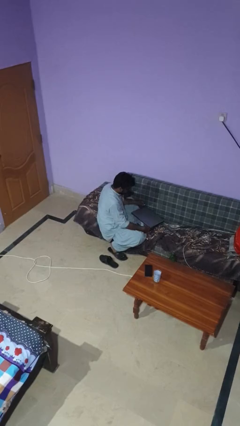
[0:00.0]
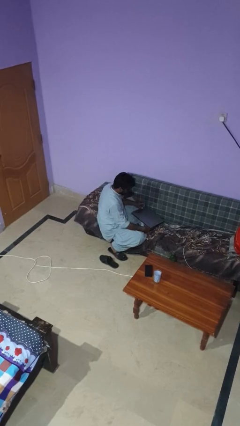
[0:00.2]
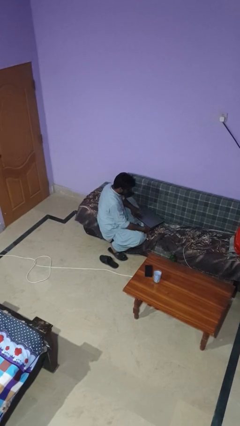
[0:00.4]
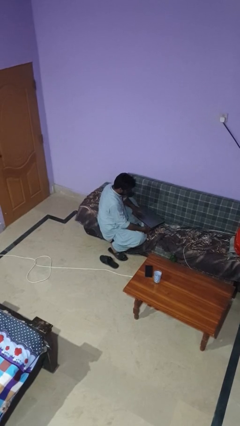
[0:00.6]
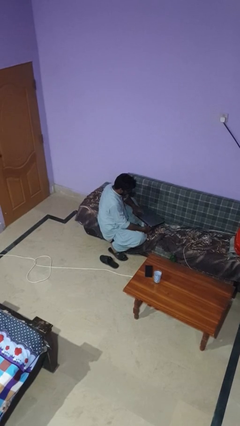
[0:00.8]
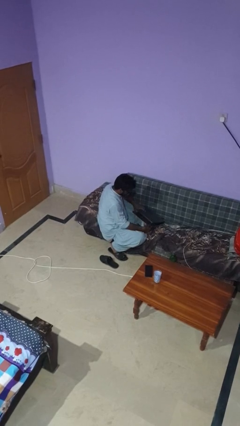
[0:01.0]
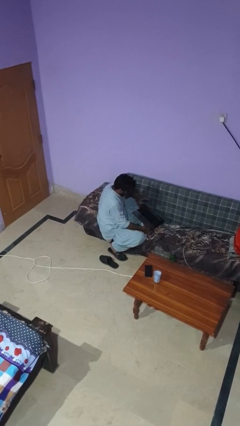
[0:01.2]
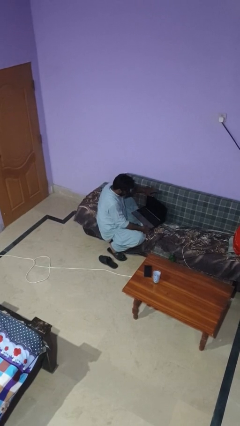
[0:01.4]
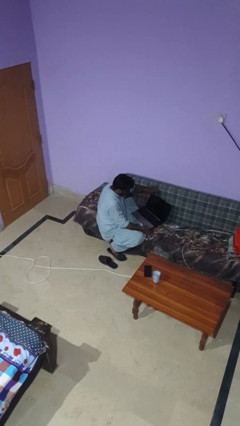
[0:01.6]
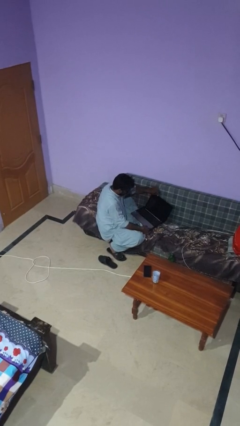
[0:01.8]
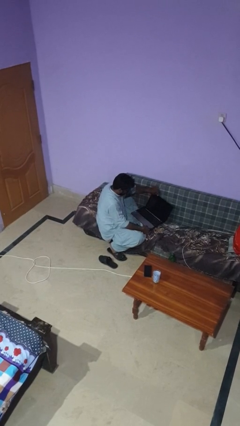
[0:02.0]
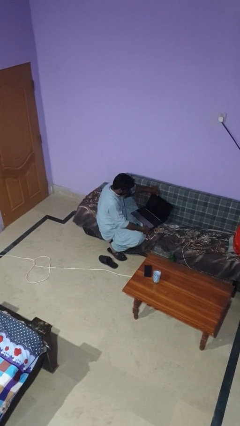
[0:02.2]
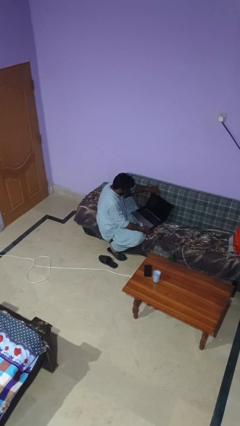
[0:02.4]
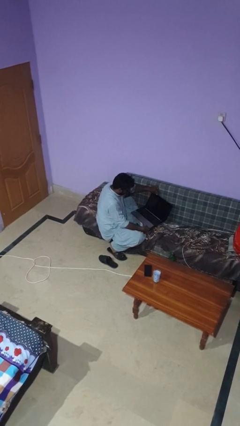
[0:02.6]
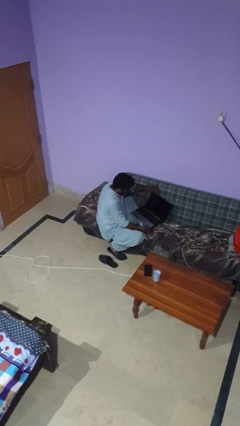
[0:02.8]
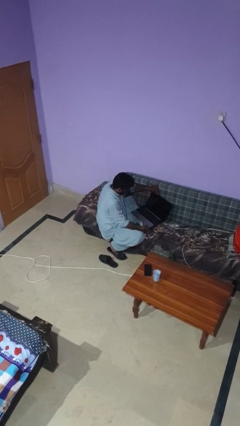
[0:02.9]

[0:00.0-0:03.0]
person opens laptop

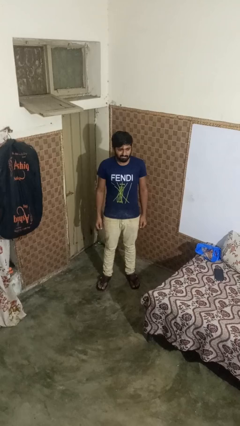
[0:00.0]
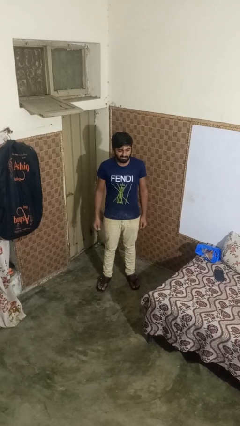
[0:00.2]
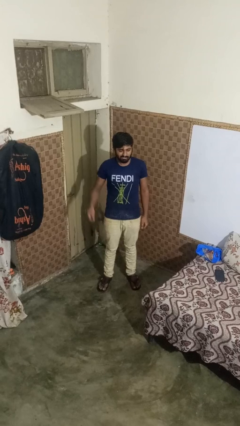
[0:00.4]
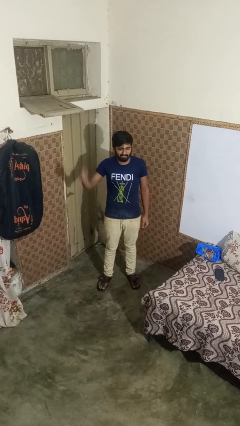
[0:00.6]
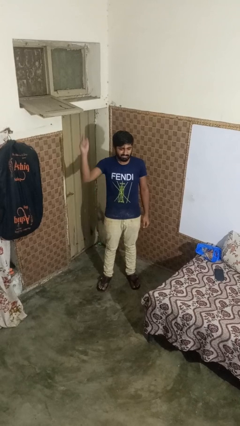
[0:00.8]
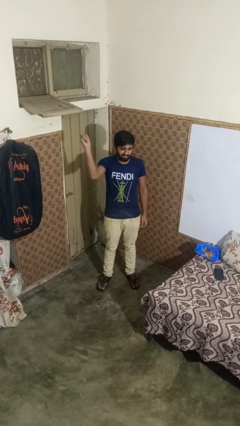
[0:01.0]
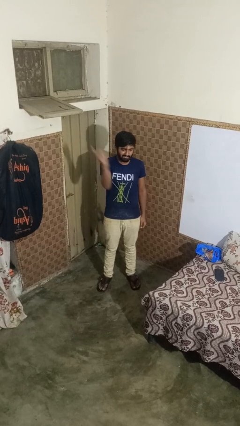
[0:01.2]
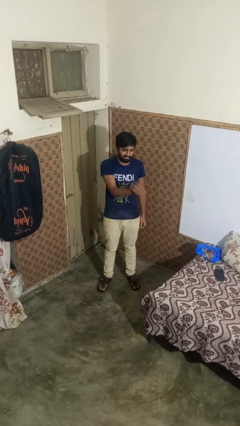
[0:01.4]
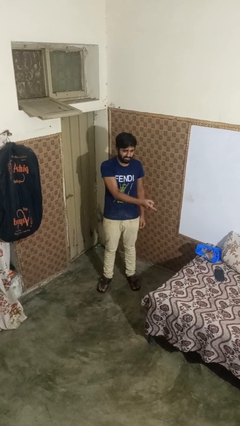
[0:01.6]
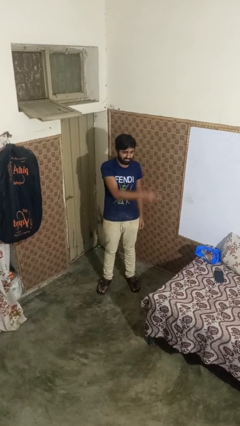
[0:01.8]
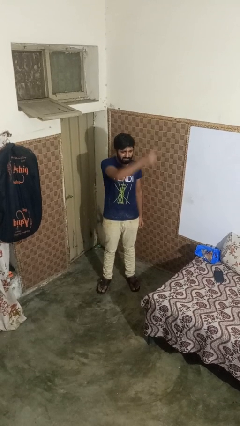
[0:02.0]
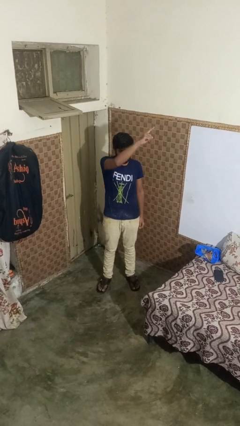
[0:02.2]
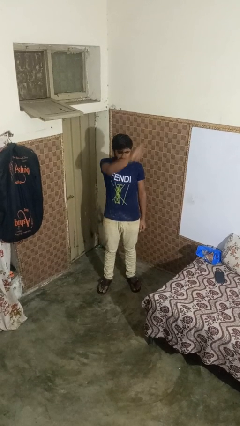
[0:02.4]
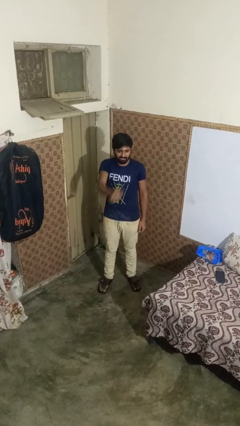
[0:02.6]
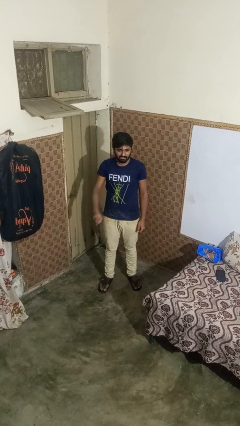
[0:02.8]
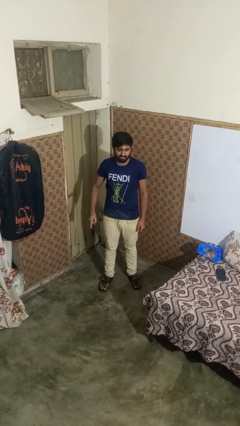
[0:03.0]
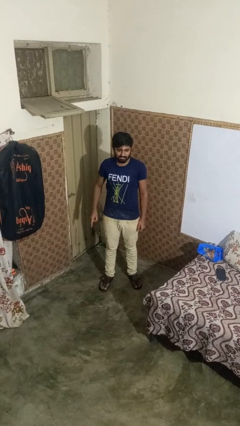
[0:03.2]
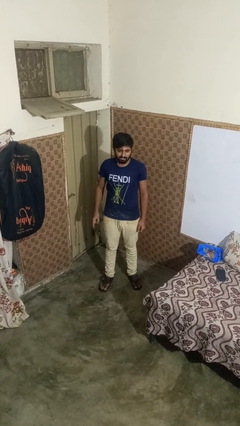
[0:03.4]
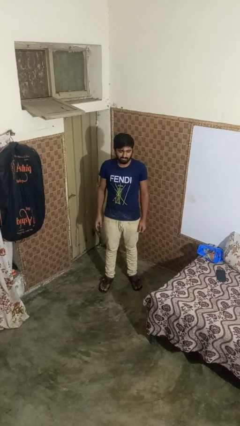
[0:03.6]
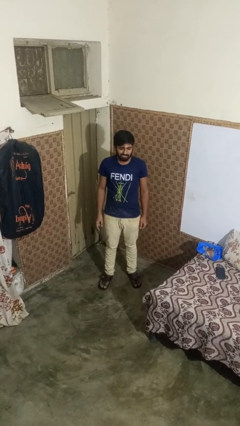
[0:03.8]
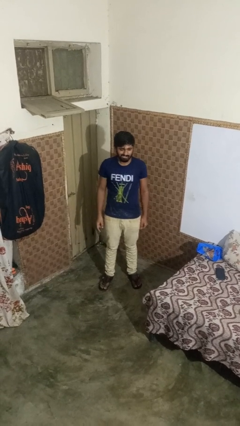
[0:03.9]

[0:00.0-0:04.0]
person gestures cut

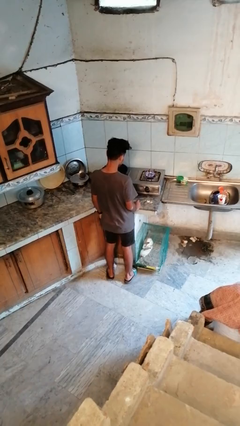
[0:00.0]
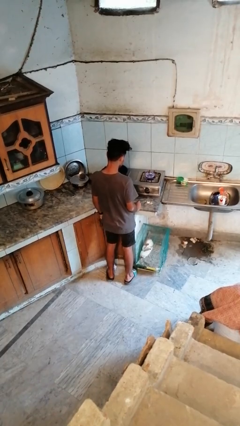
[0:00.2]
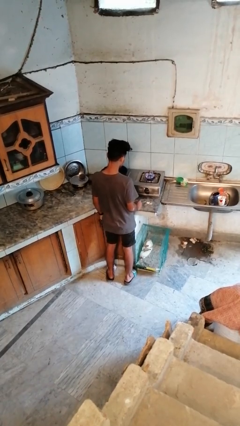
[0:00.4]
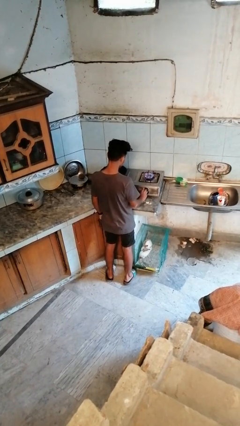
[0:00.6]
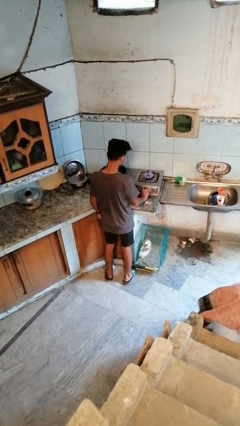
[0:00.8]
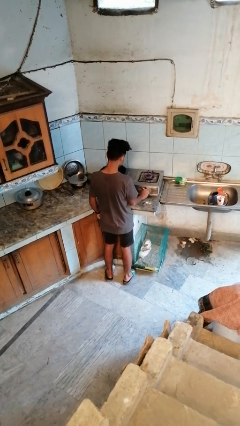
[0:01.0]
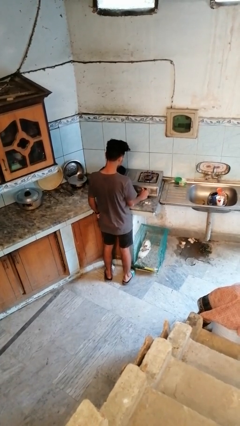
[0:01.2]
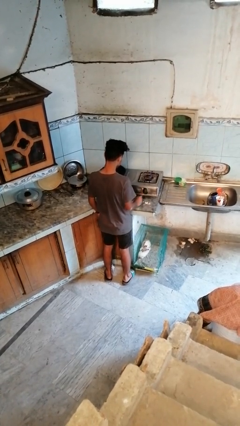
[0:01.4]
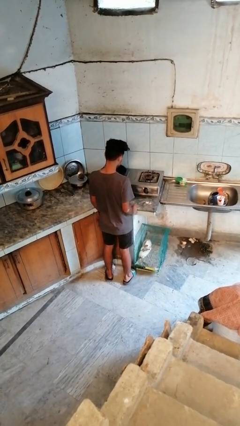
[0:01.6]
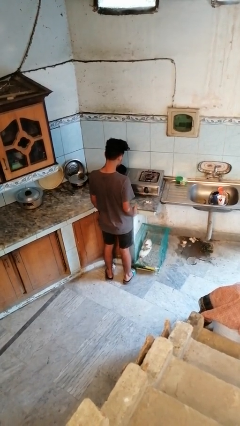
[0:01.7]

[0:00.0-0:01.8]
person turns off stovetop

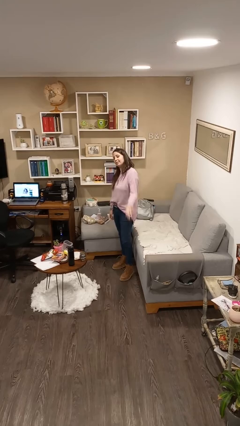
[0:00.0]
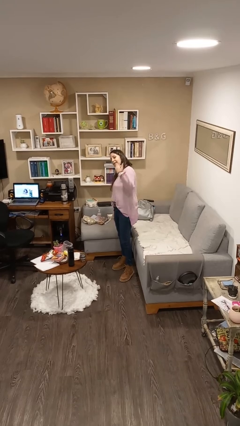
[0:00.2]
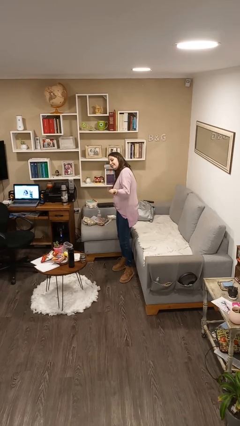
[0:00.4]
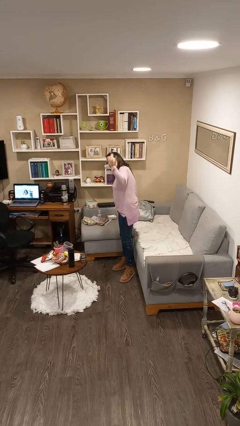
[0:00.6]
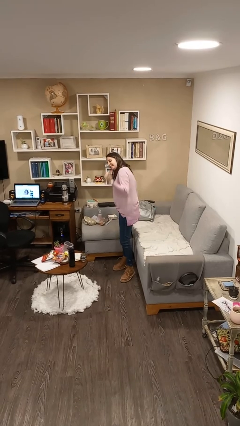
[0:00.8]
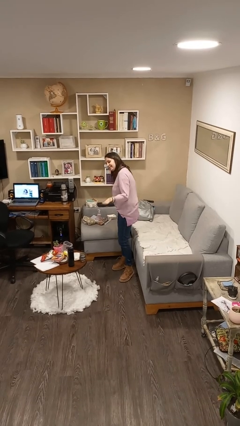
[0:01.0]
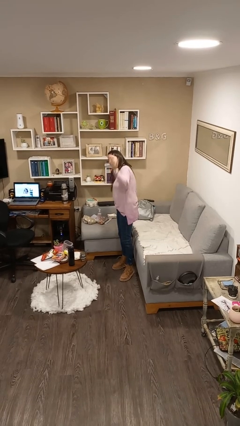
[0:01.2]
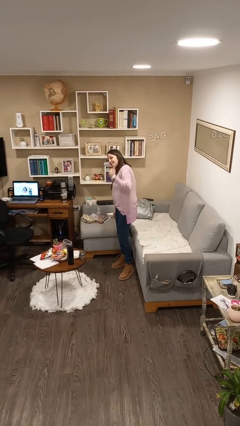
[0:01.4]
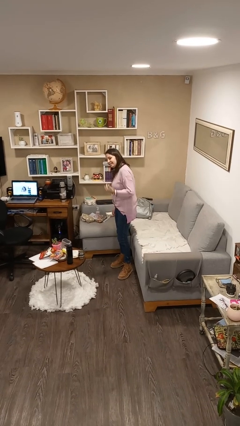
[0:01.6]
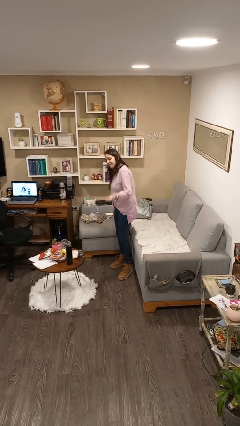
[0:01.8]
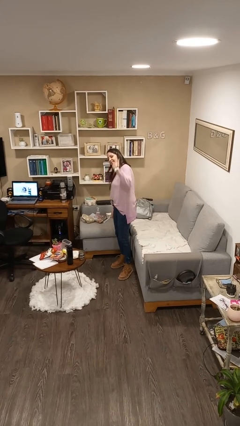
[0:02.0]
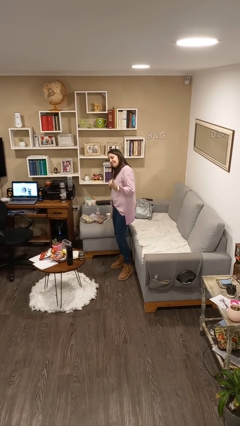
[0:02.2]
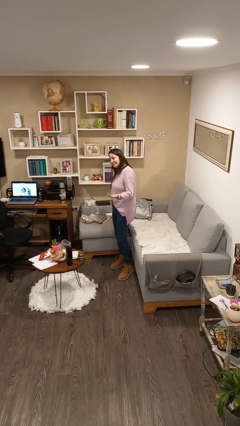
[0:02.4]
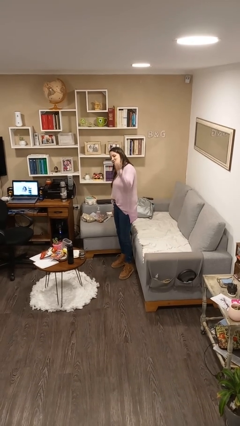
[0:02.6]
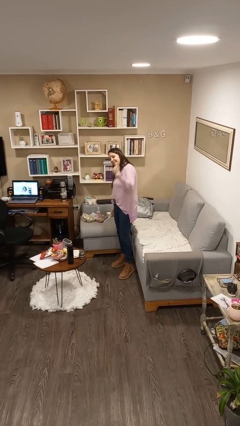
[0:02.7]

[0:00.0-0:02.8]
person gestures come here

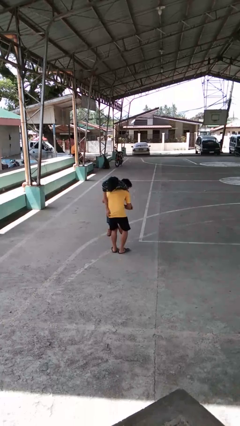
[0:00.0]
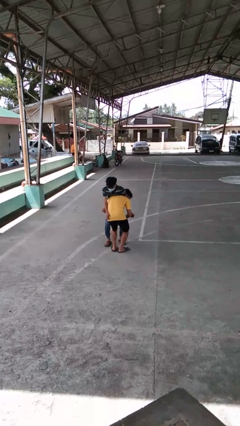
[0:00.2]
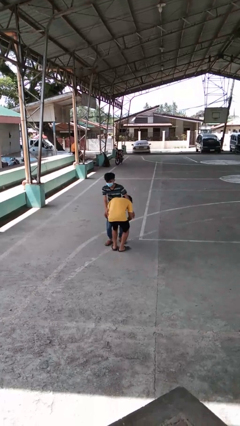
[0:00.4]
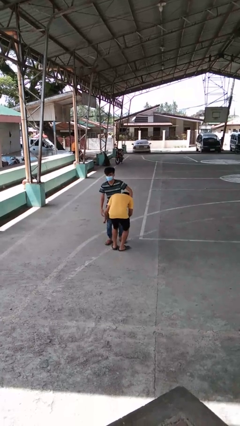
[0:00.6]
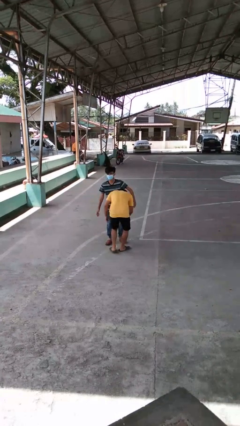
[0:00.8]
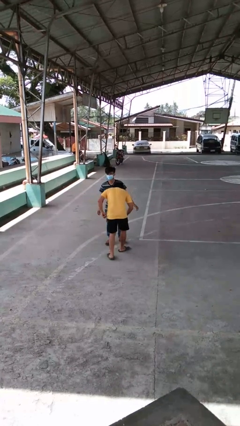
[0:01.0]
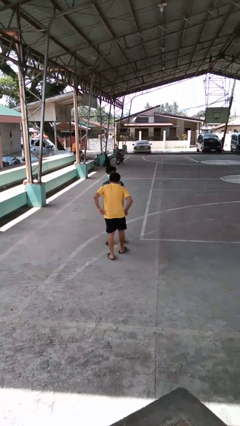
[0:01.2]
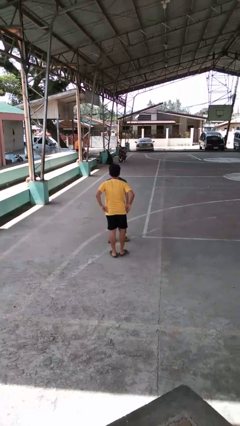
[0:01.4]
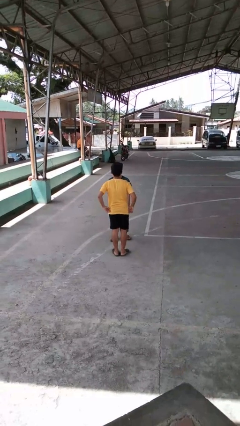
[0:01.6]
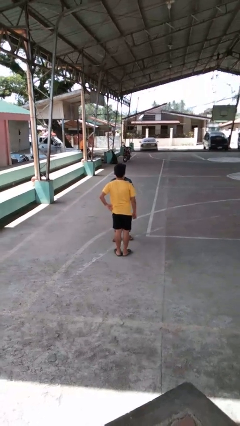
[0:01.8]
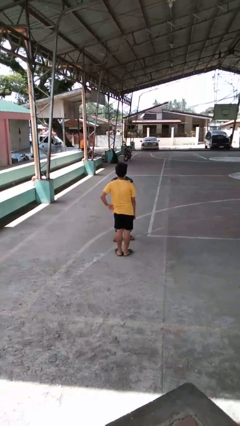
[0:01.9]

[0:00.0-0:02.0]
person puts down person

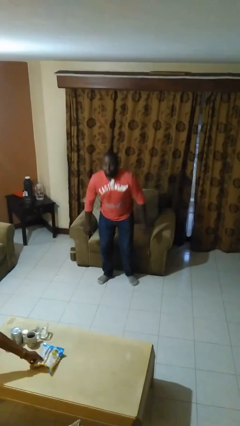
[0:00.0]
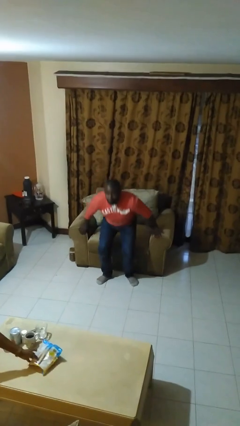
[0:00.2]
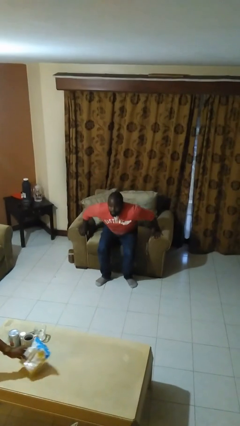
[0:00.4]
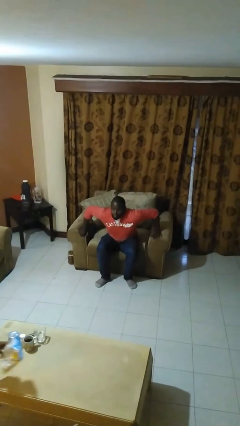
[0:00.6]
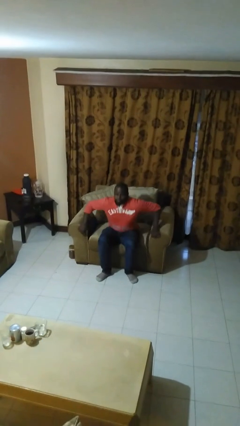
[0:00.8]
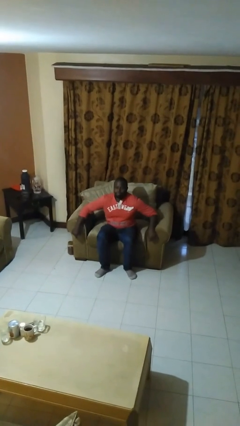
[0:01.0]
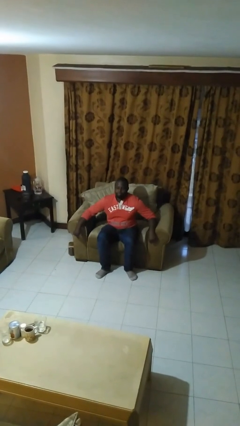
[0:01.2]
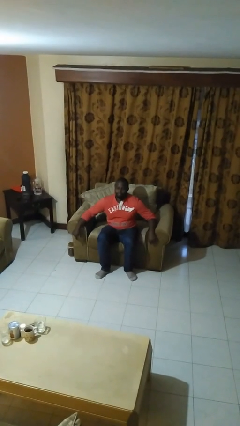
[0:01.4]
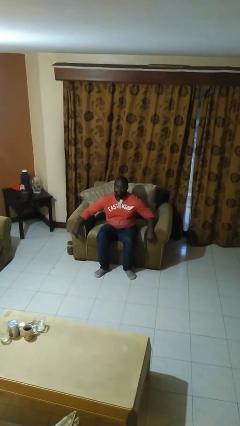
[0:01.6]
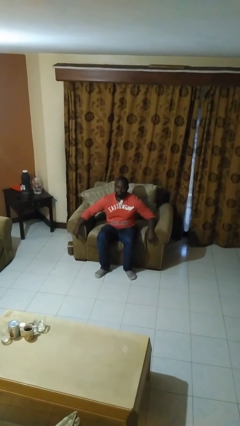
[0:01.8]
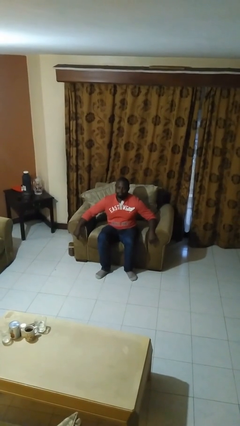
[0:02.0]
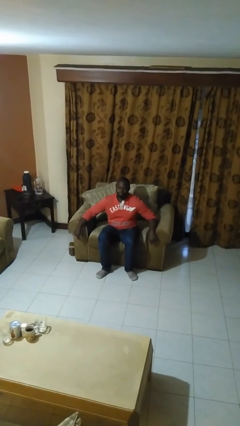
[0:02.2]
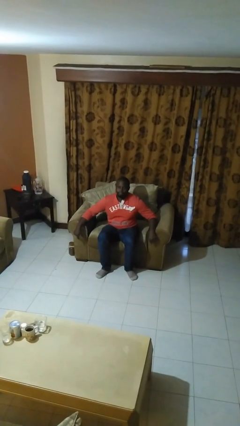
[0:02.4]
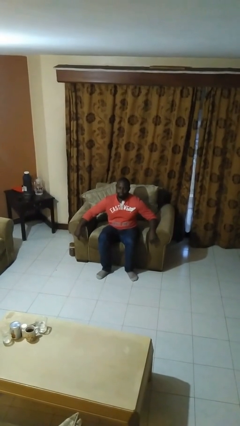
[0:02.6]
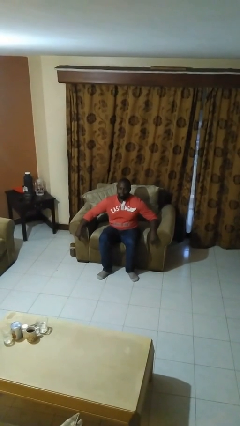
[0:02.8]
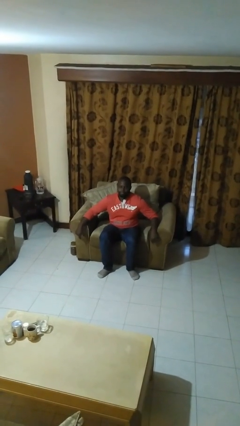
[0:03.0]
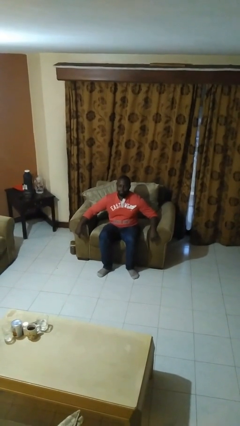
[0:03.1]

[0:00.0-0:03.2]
person sits down

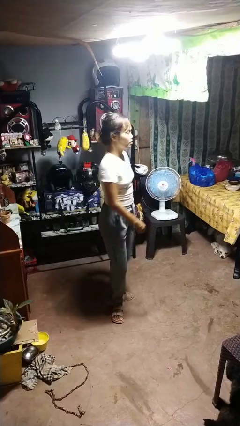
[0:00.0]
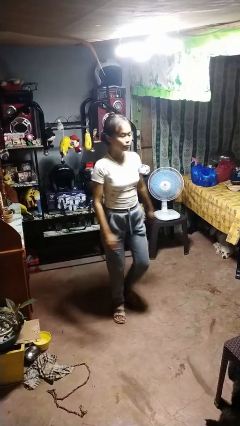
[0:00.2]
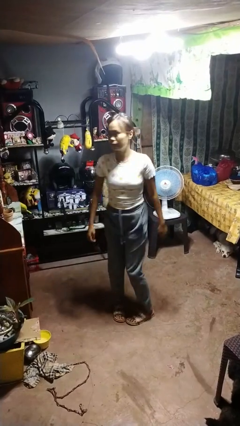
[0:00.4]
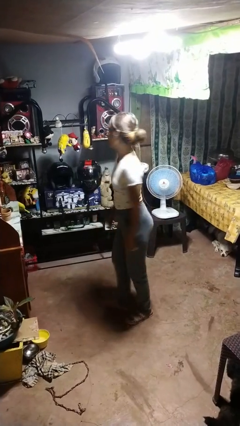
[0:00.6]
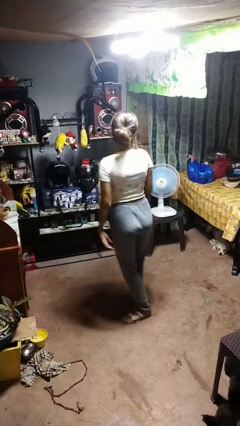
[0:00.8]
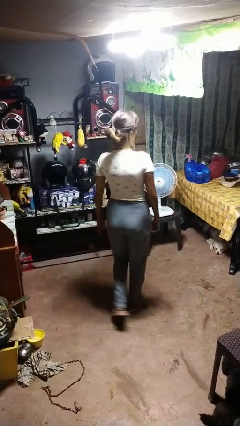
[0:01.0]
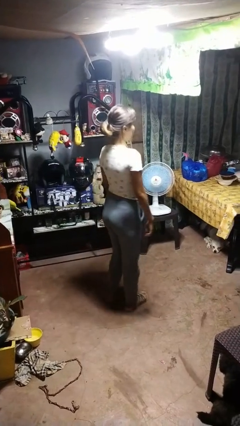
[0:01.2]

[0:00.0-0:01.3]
person twirls
